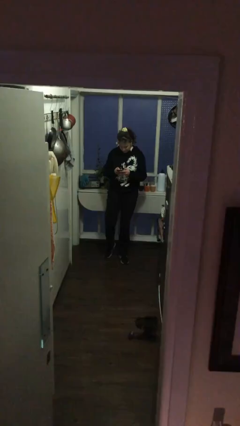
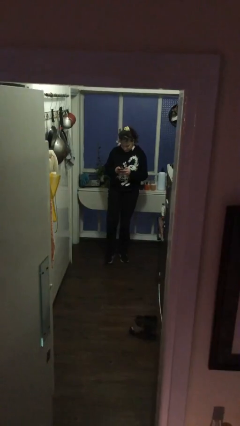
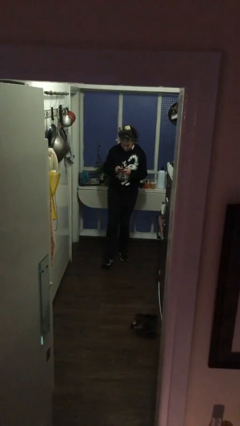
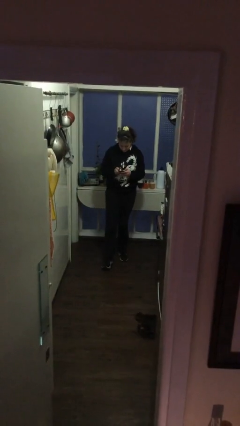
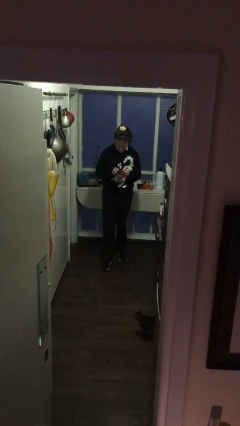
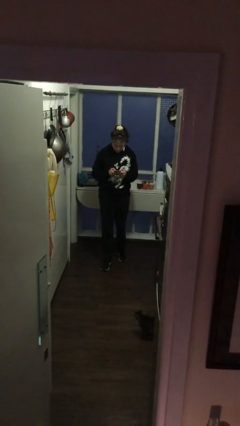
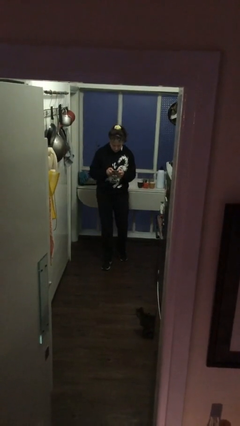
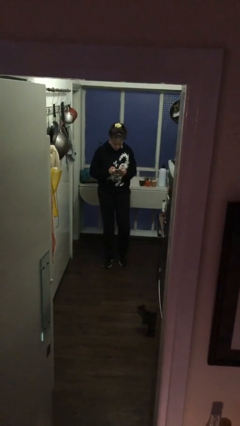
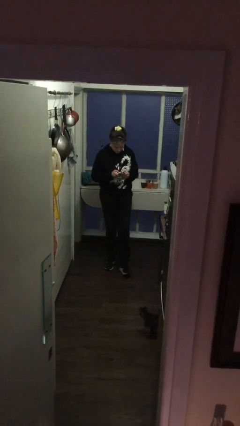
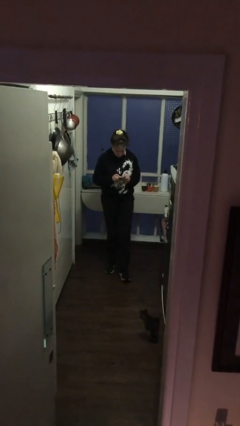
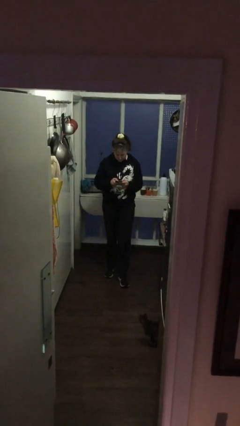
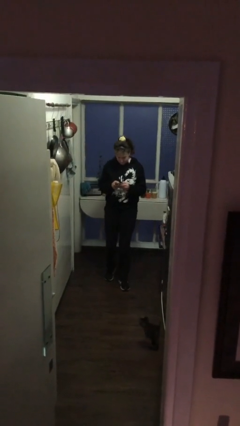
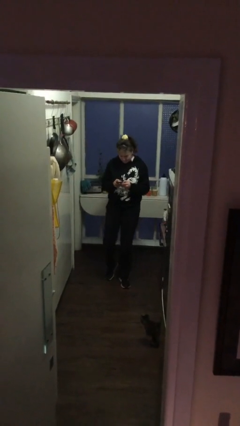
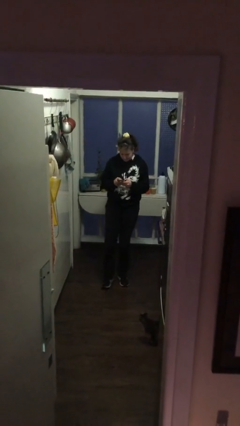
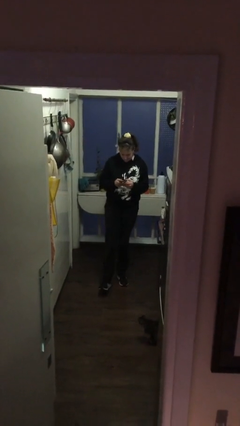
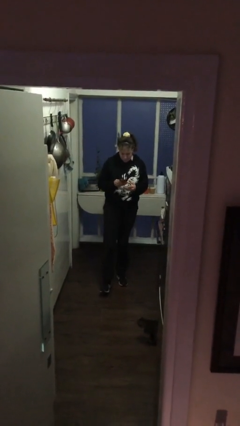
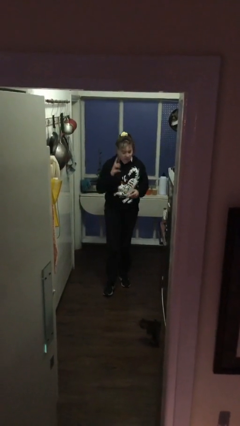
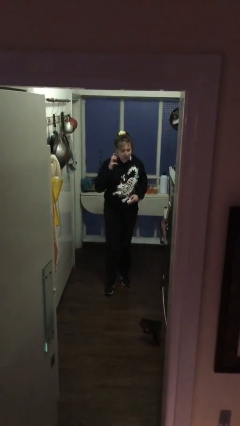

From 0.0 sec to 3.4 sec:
person texts on phone

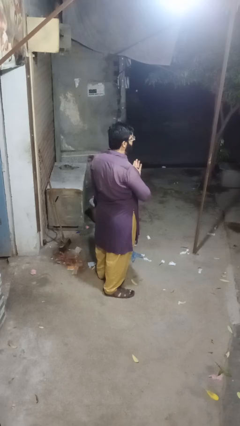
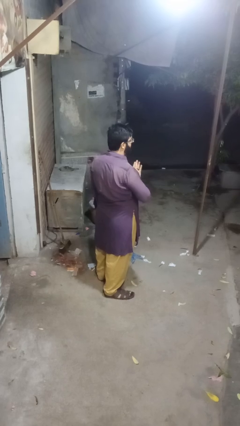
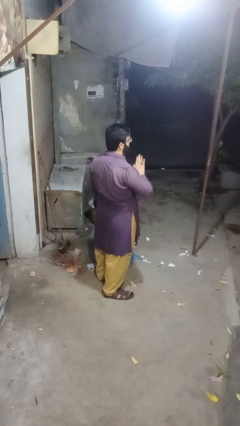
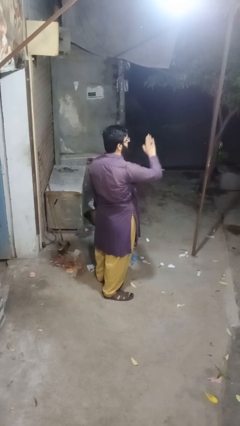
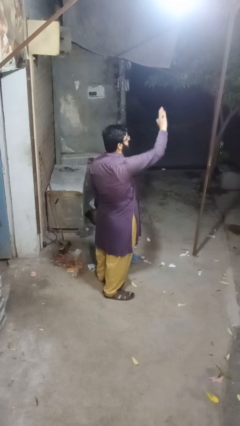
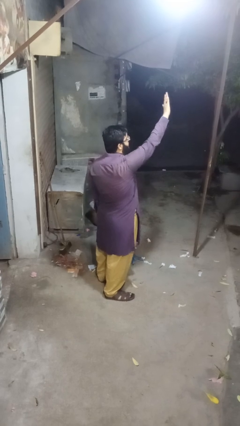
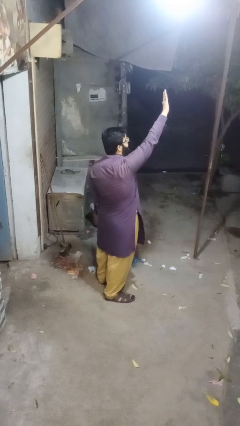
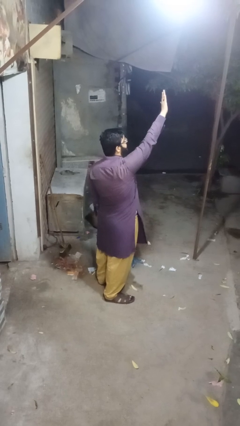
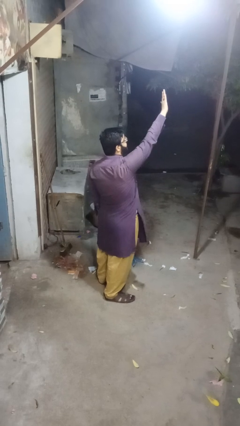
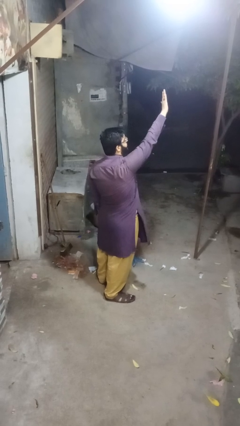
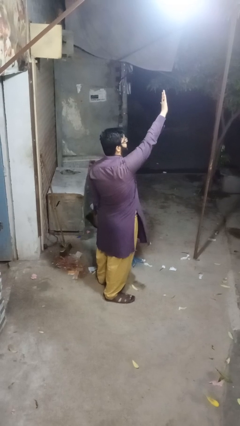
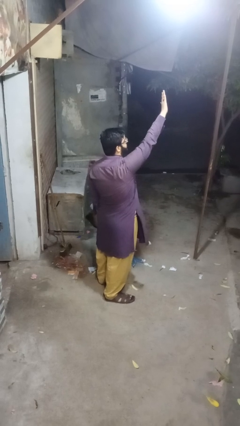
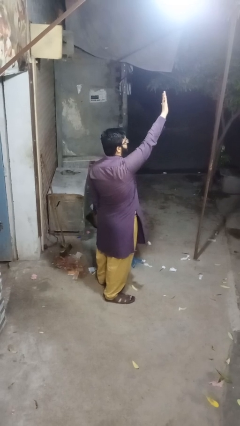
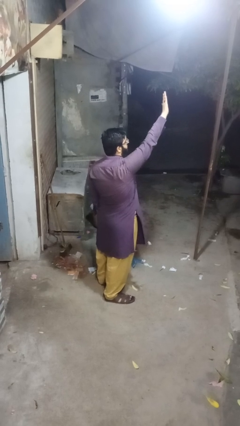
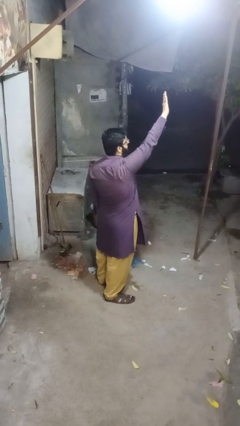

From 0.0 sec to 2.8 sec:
person gestures swipe up

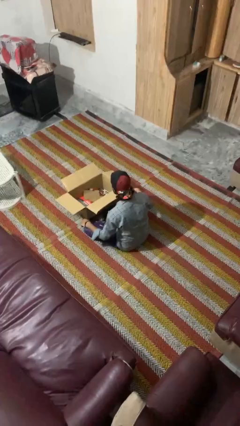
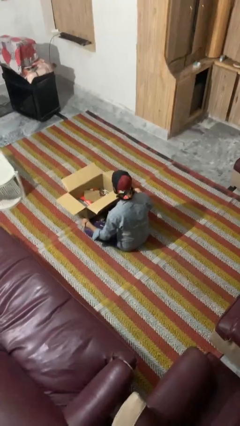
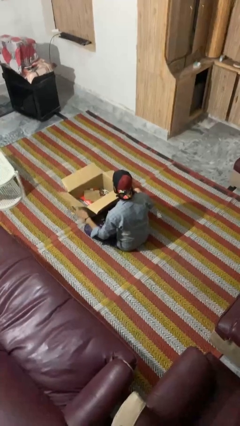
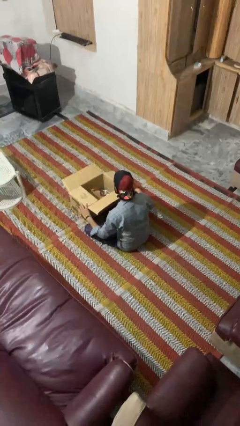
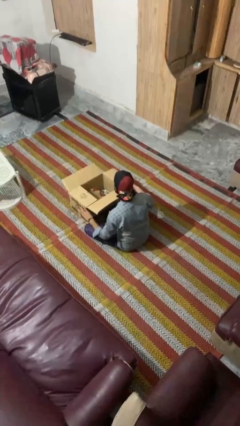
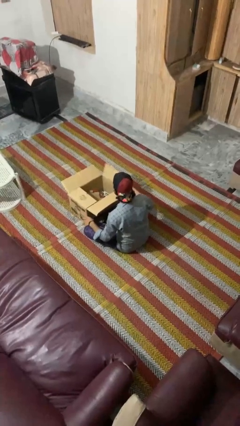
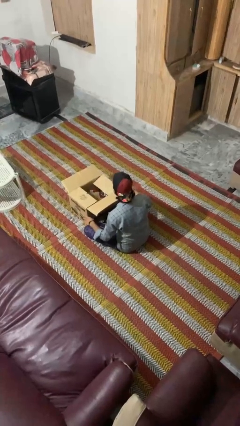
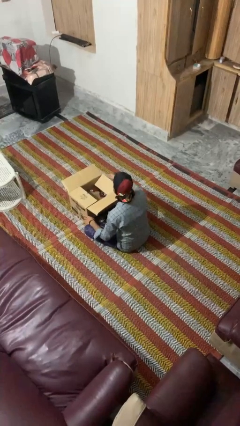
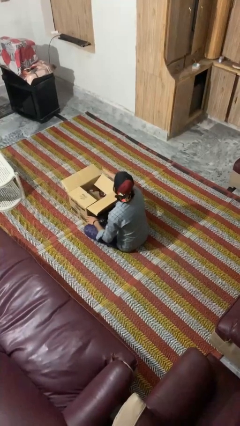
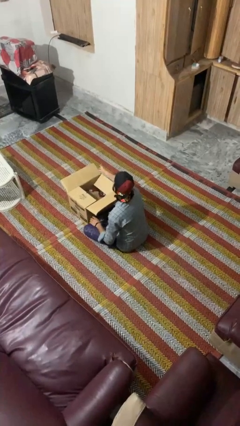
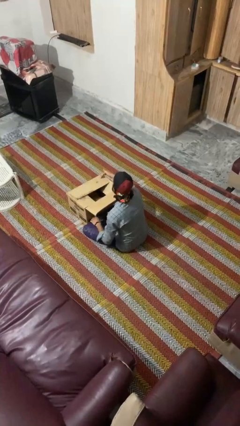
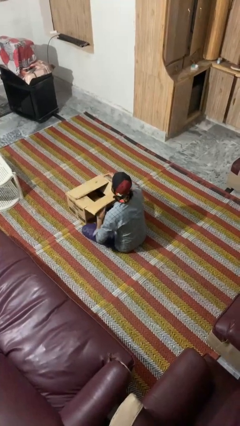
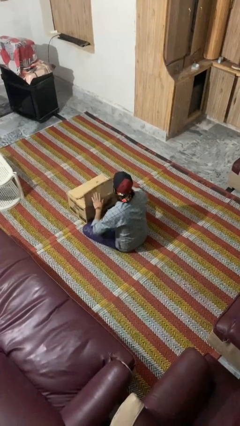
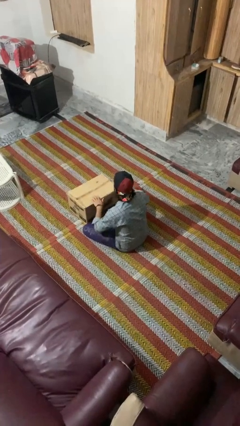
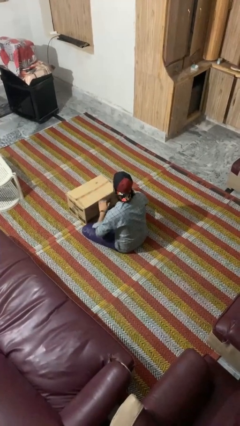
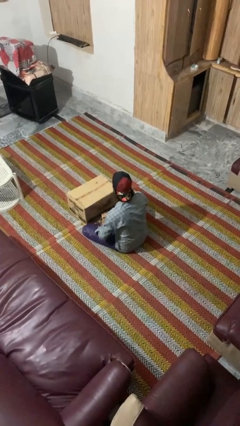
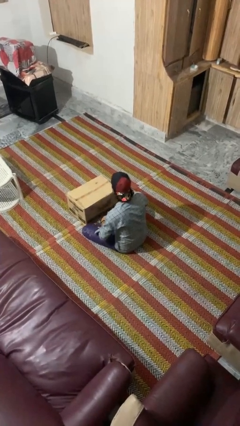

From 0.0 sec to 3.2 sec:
person closes box

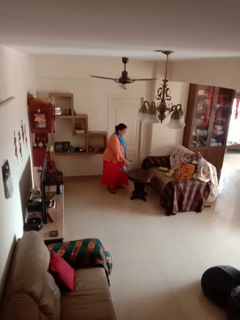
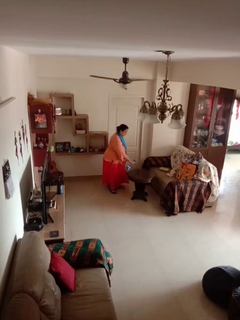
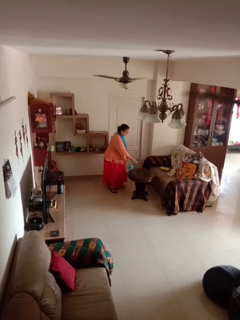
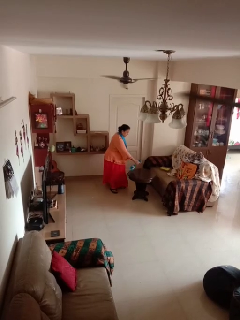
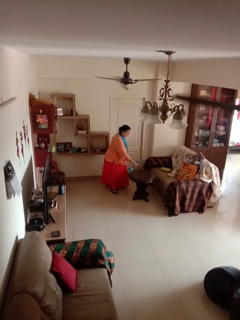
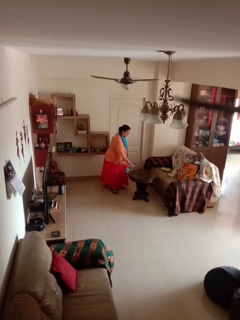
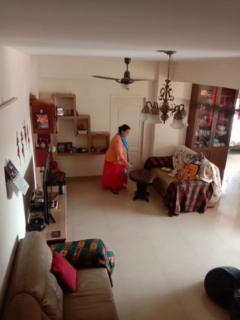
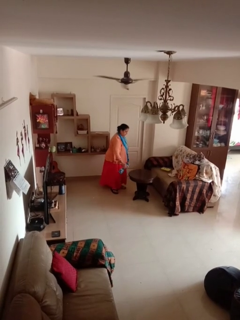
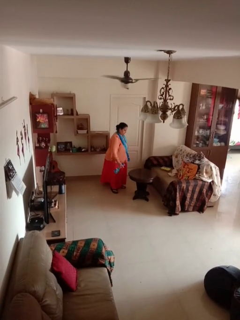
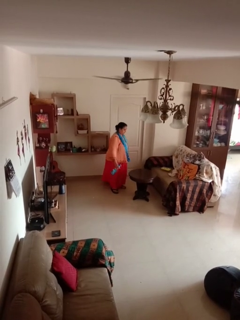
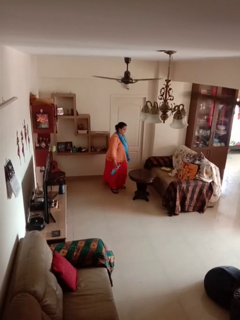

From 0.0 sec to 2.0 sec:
person sprays from bottle

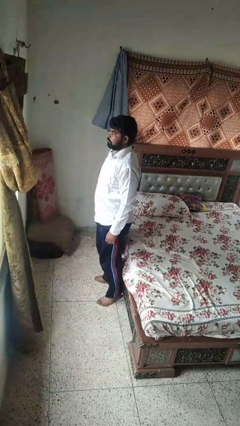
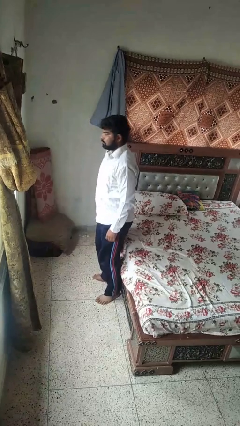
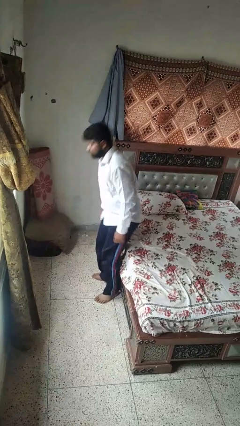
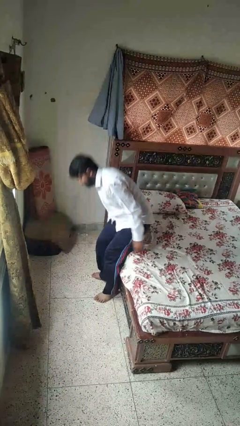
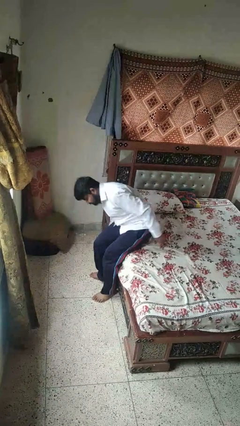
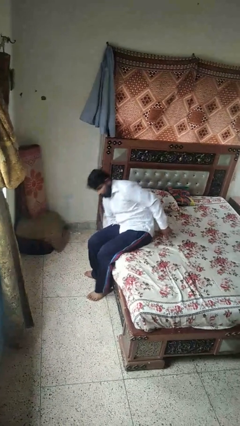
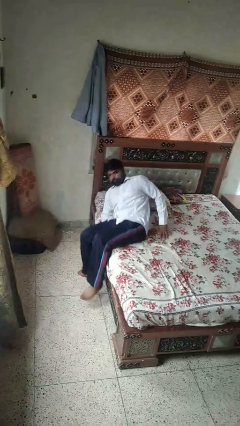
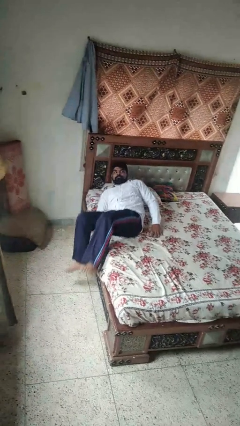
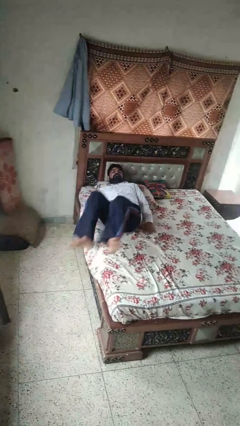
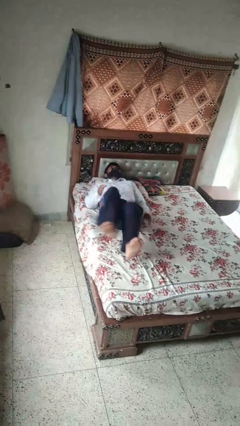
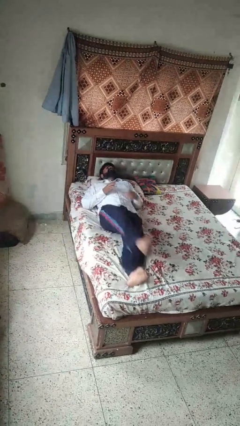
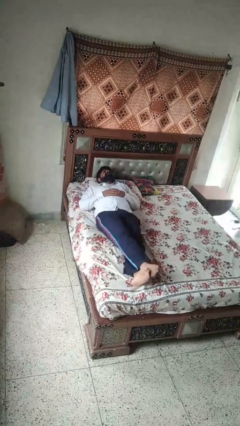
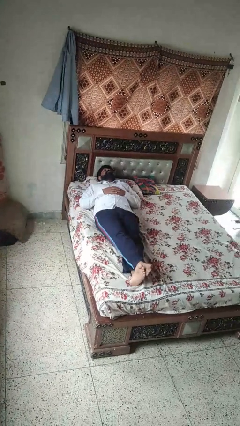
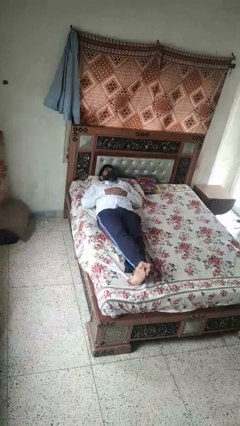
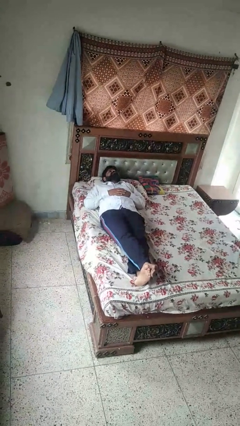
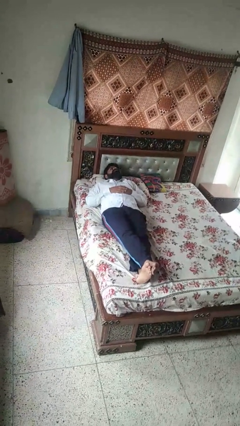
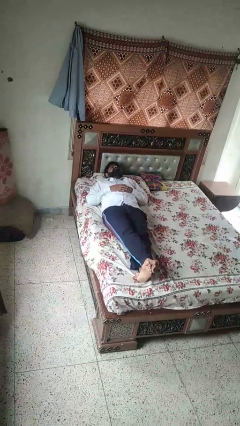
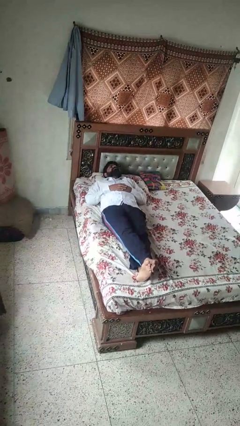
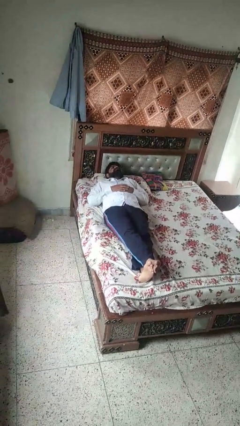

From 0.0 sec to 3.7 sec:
person lies down on bed

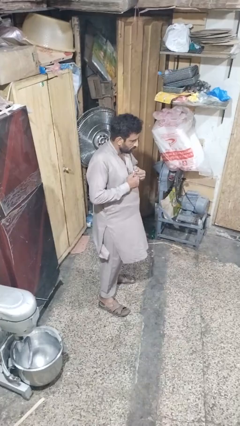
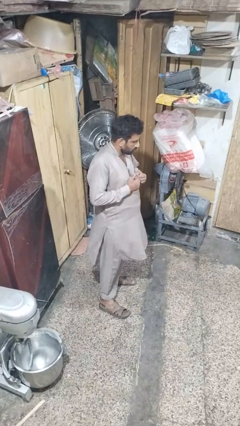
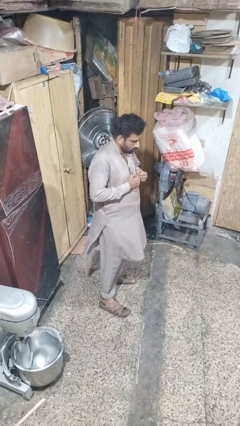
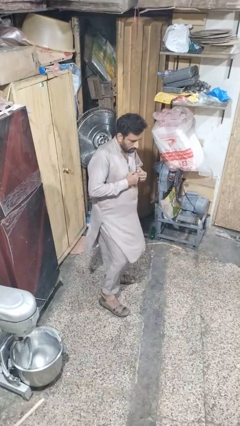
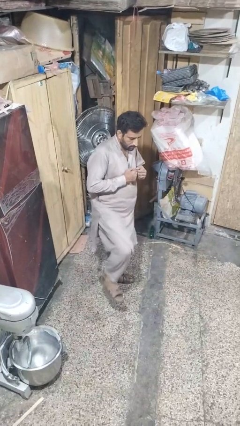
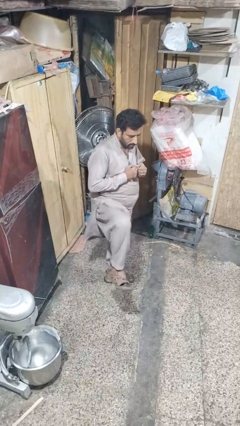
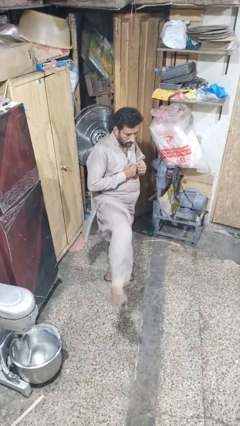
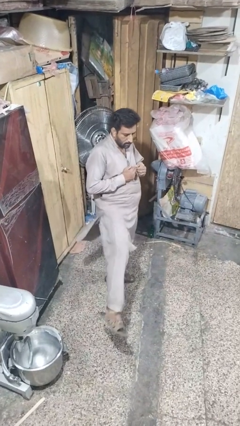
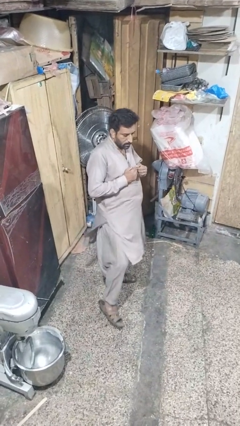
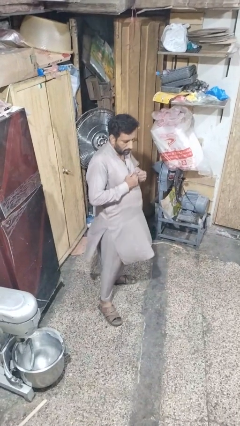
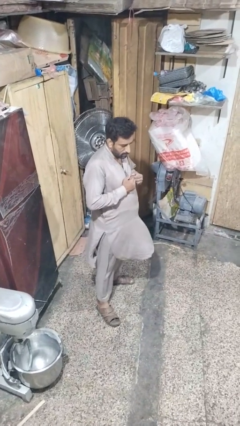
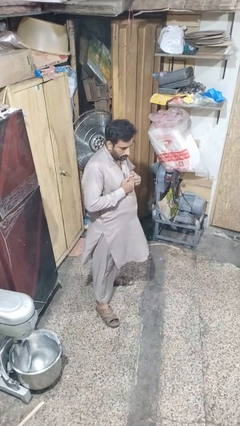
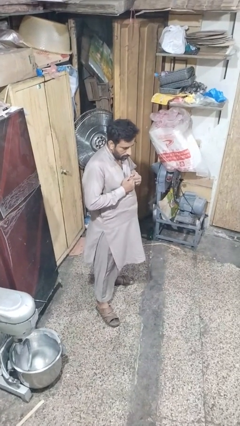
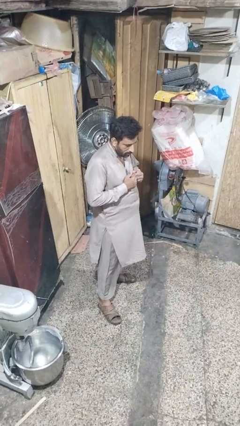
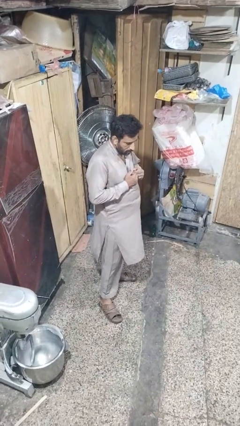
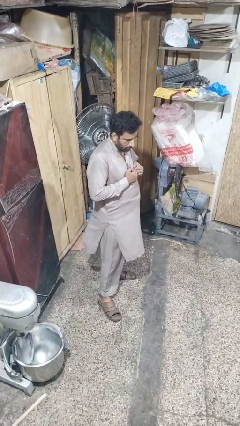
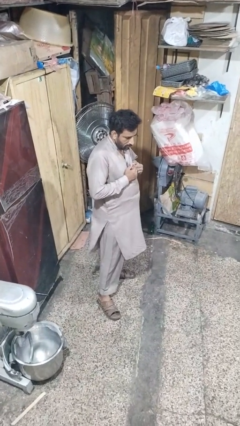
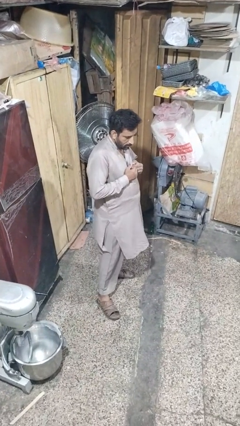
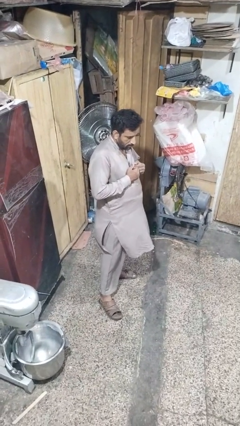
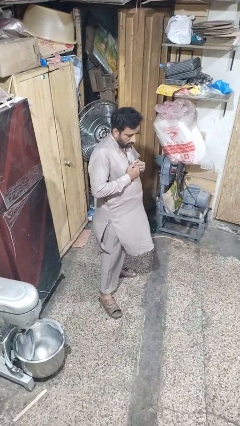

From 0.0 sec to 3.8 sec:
person karate kicks
